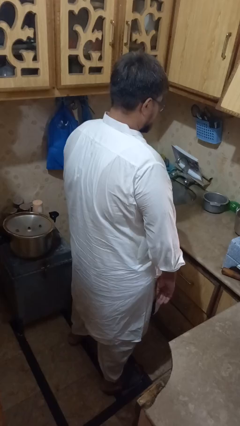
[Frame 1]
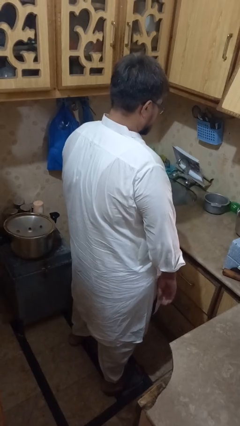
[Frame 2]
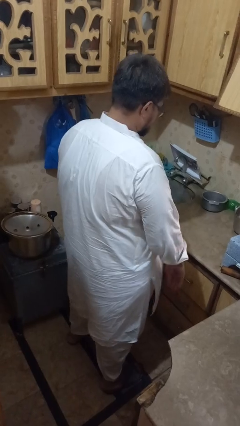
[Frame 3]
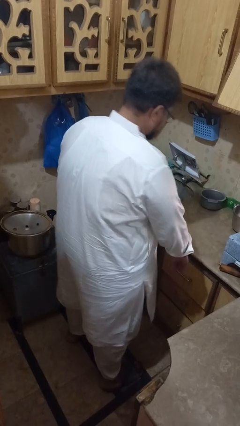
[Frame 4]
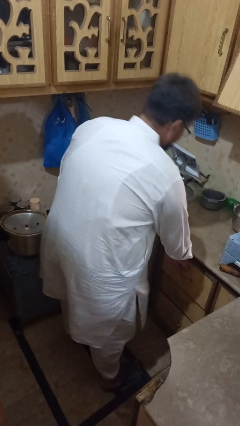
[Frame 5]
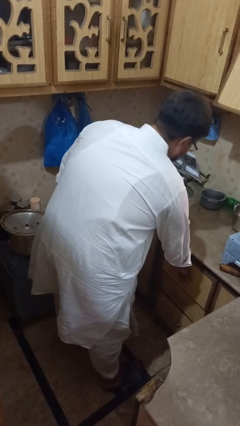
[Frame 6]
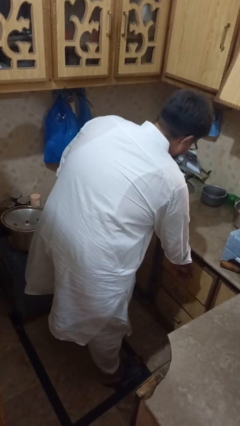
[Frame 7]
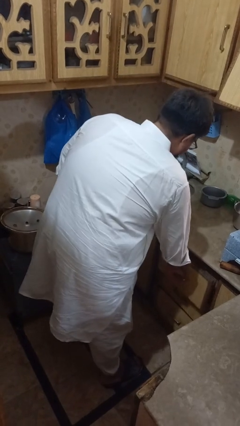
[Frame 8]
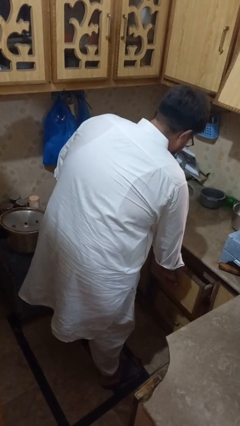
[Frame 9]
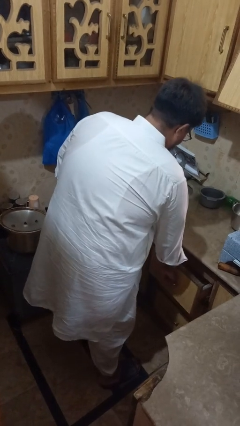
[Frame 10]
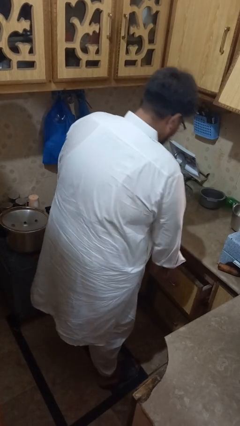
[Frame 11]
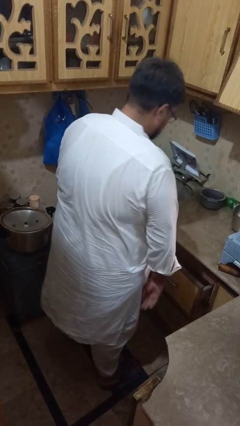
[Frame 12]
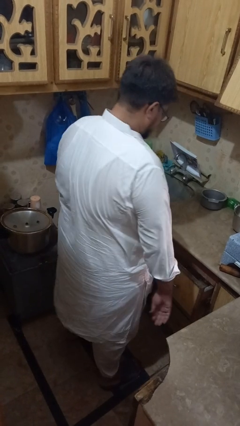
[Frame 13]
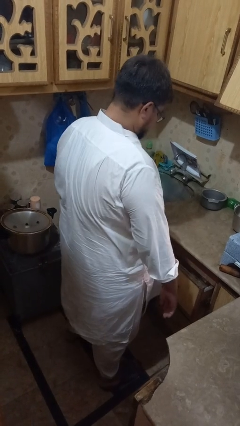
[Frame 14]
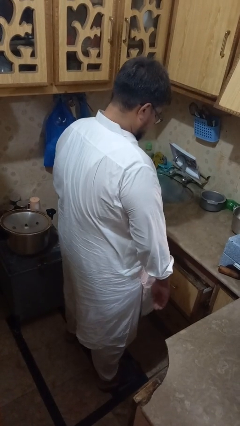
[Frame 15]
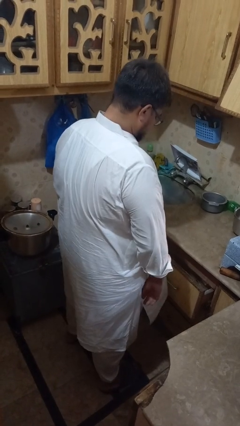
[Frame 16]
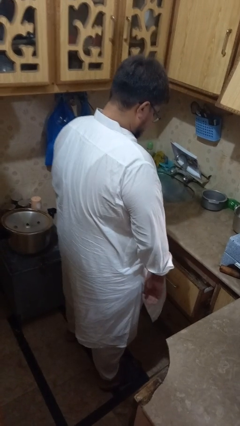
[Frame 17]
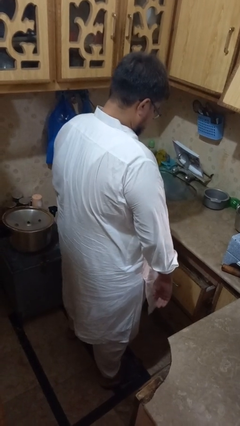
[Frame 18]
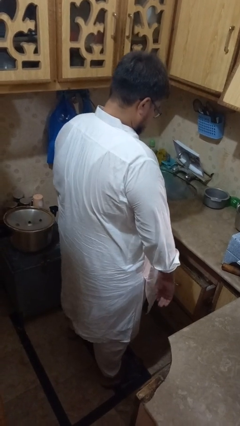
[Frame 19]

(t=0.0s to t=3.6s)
person opens kitchen drawer

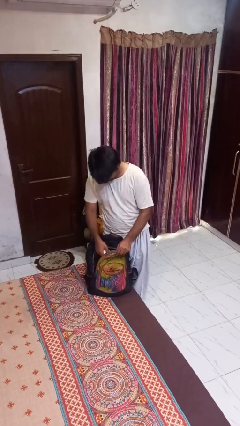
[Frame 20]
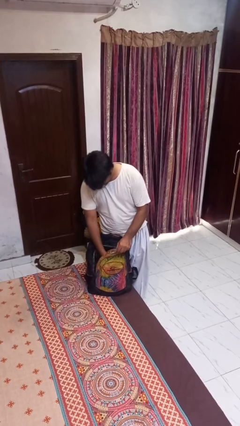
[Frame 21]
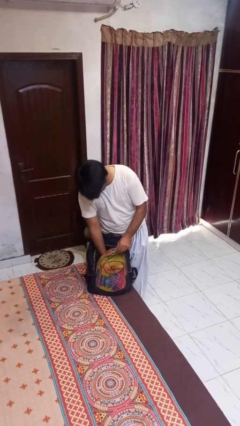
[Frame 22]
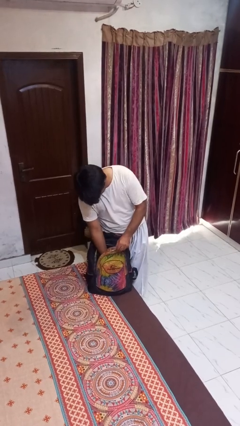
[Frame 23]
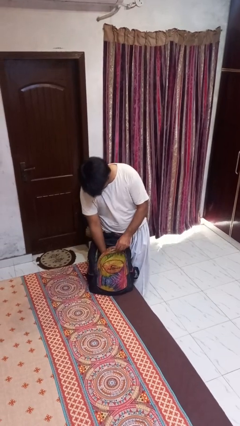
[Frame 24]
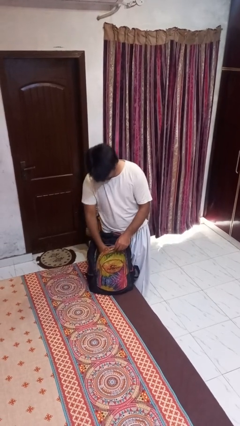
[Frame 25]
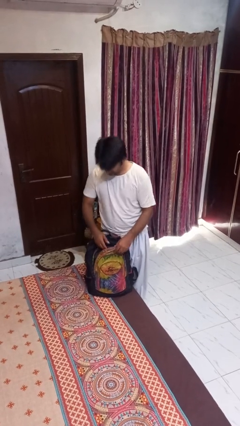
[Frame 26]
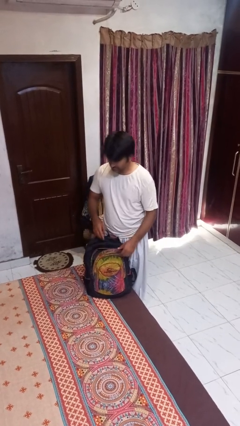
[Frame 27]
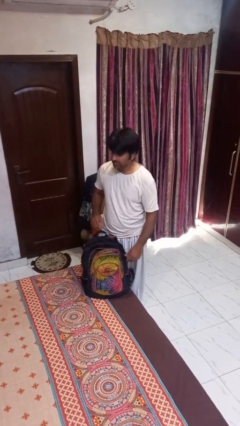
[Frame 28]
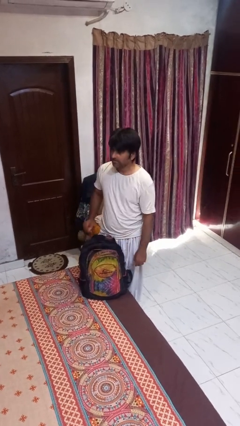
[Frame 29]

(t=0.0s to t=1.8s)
person puts object into backpack

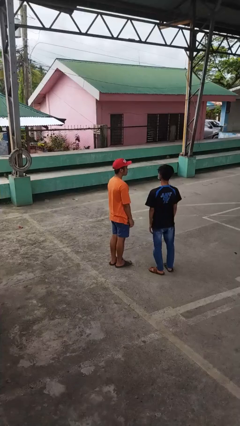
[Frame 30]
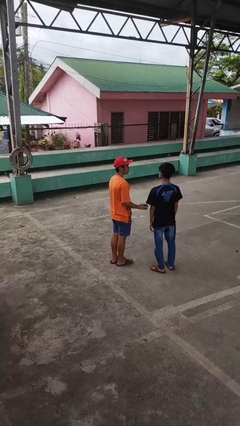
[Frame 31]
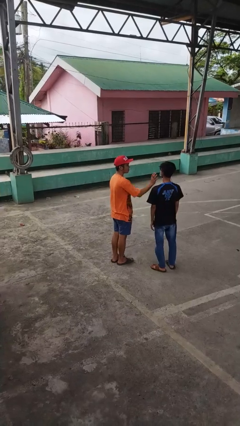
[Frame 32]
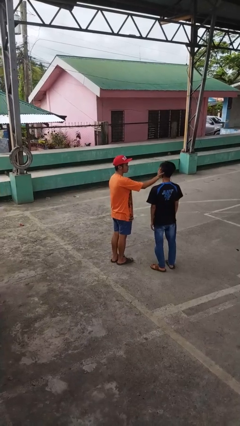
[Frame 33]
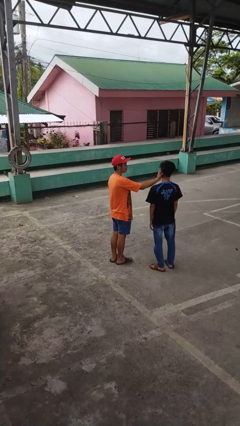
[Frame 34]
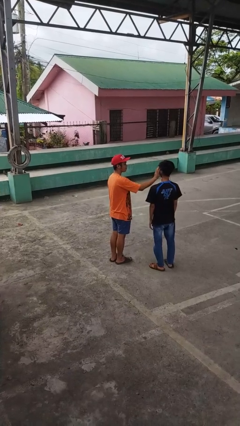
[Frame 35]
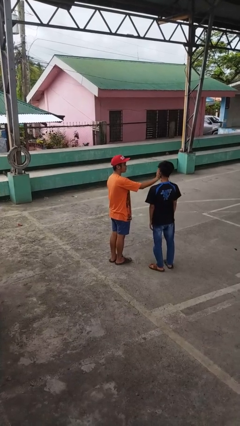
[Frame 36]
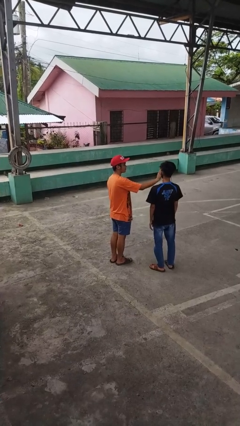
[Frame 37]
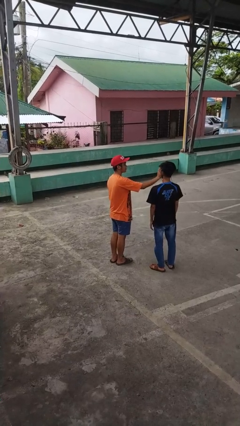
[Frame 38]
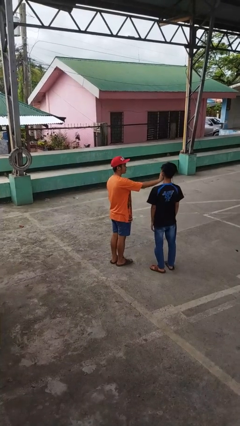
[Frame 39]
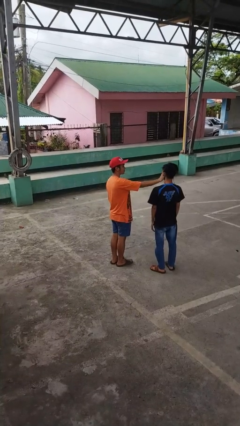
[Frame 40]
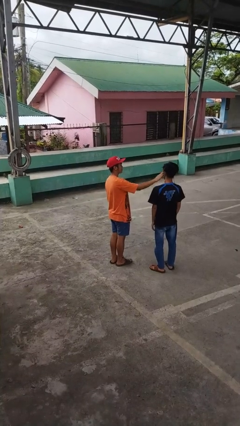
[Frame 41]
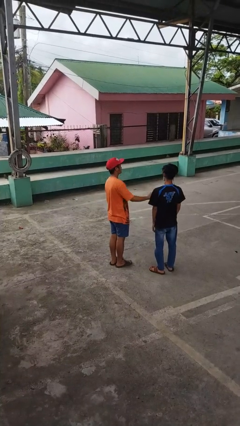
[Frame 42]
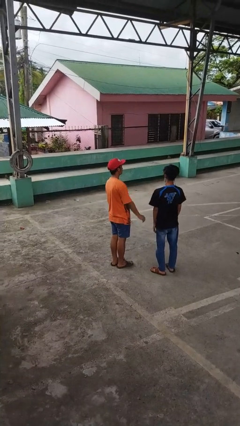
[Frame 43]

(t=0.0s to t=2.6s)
person touches face of person

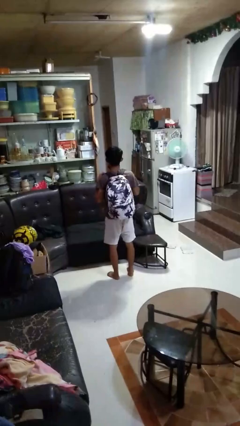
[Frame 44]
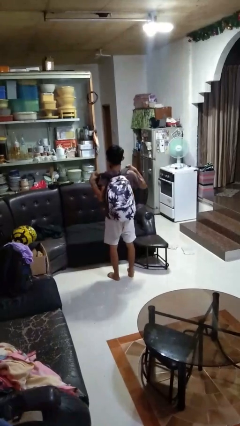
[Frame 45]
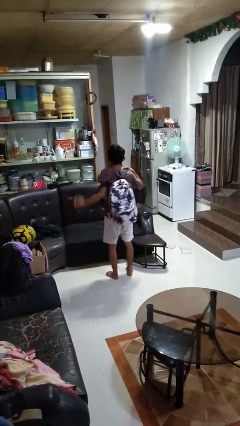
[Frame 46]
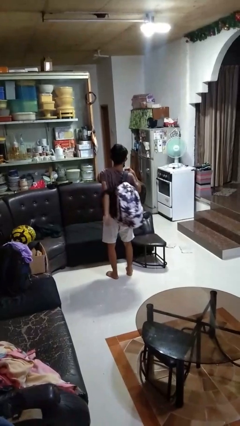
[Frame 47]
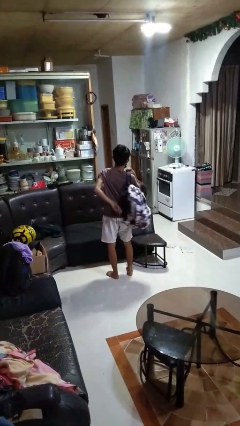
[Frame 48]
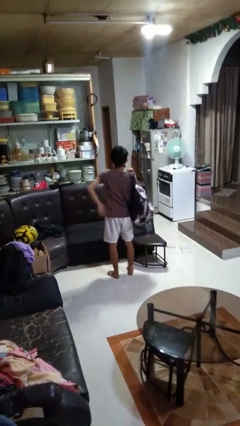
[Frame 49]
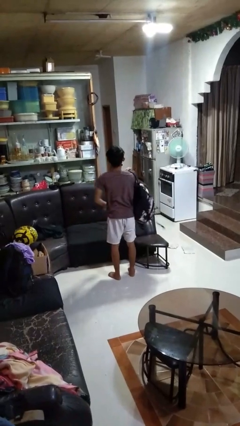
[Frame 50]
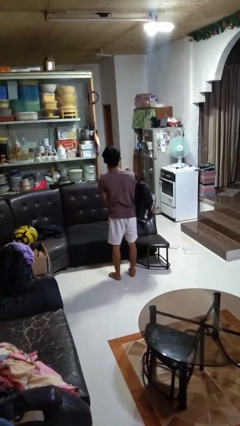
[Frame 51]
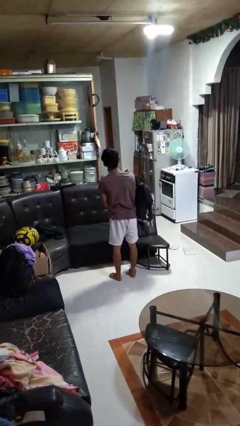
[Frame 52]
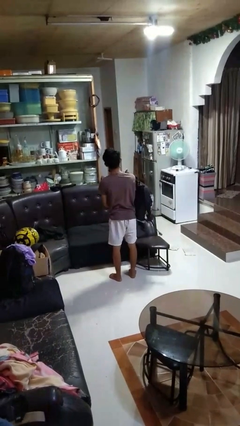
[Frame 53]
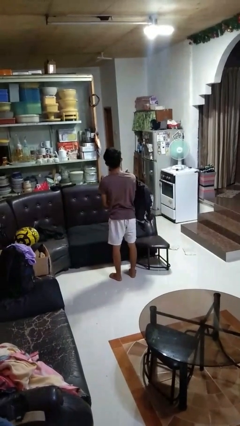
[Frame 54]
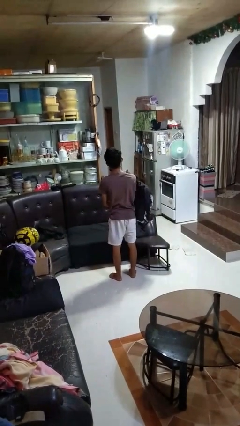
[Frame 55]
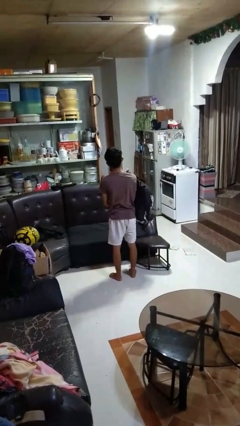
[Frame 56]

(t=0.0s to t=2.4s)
person takes off backpack

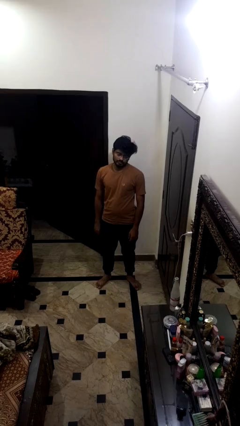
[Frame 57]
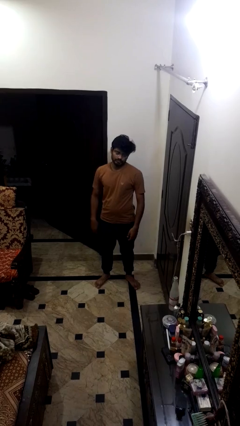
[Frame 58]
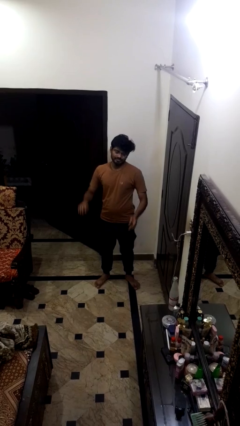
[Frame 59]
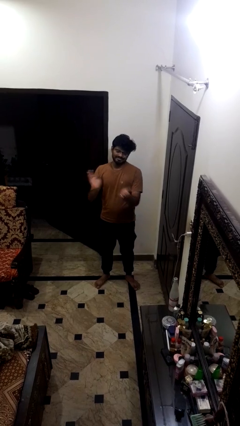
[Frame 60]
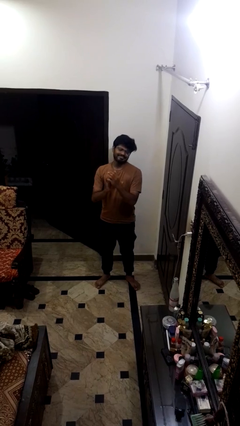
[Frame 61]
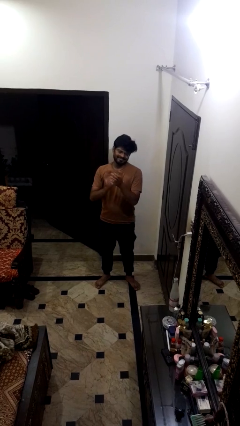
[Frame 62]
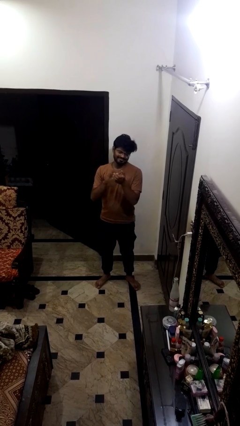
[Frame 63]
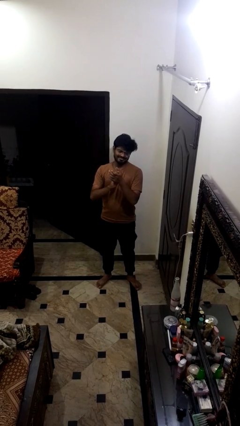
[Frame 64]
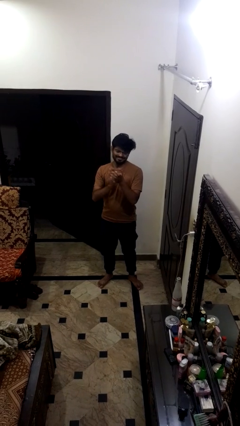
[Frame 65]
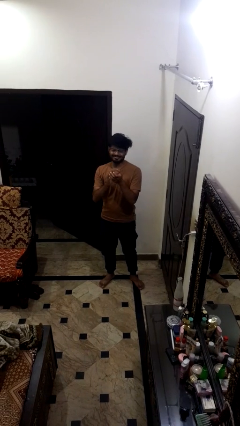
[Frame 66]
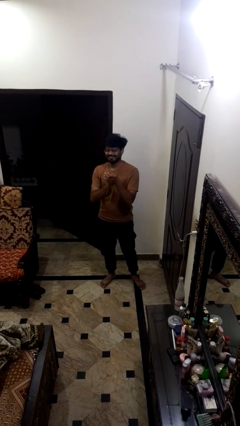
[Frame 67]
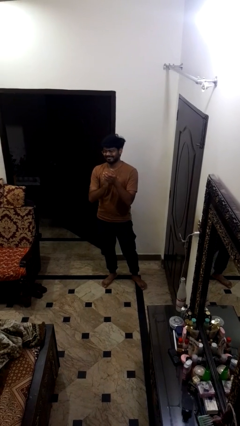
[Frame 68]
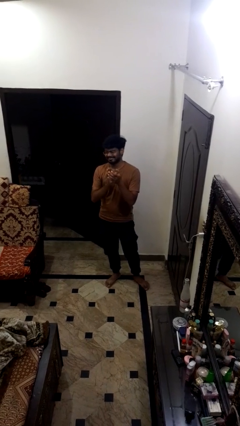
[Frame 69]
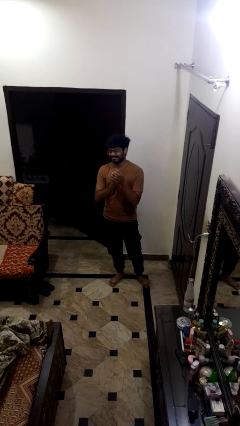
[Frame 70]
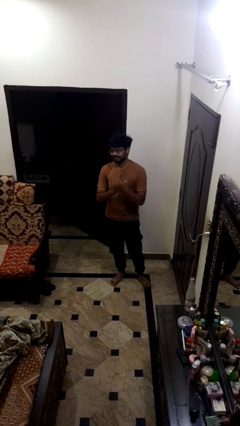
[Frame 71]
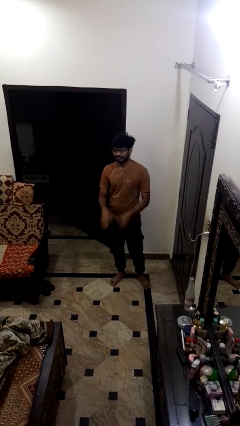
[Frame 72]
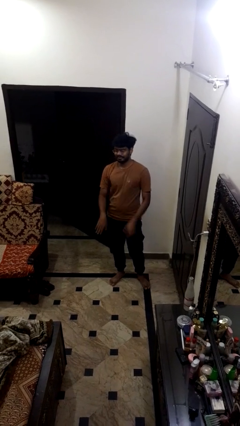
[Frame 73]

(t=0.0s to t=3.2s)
person claps hands

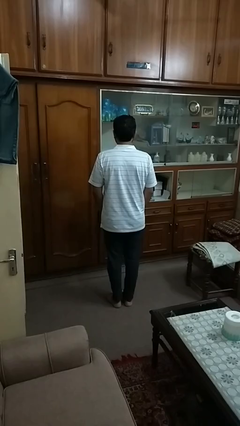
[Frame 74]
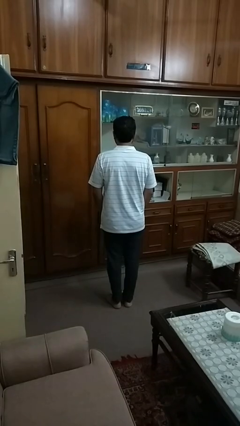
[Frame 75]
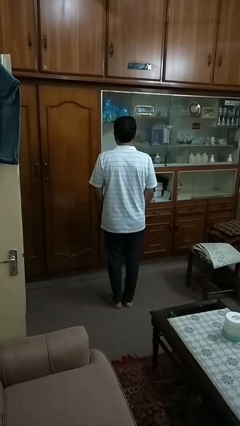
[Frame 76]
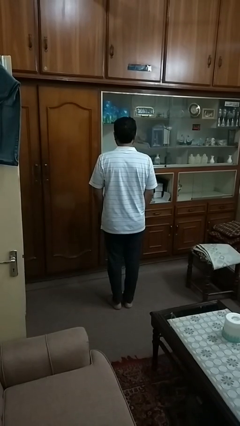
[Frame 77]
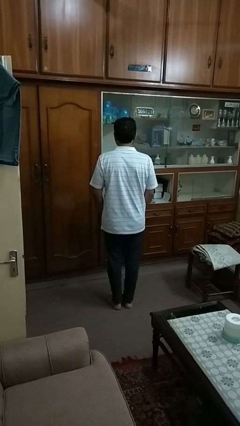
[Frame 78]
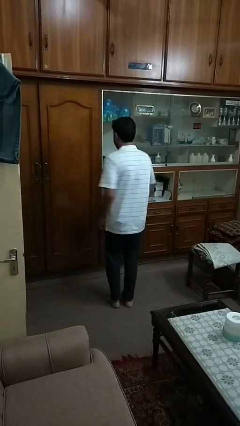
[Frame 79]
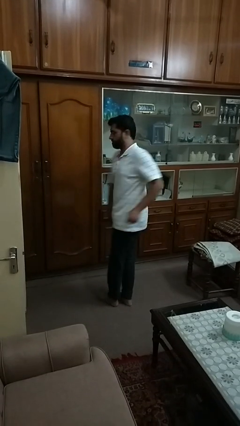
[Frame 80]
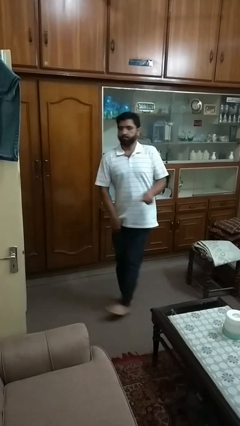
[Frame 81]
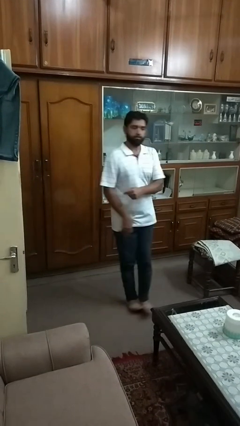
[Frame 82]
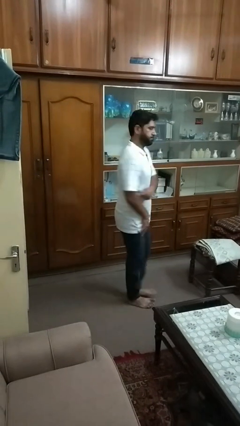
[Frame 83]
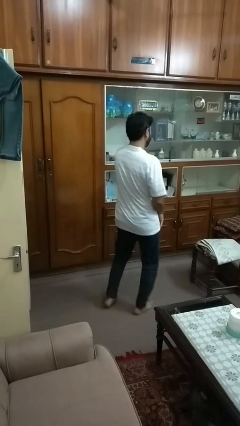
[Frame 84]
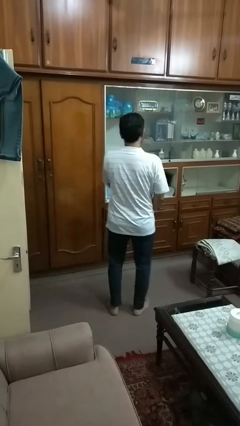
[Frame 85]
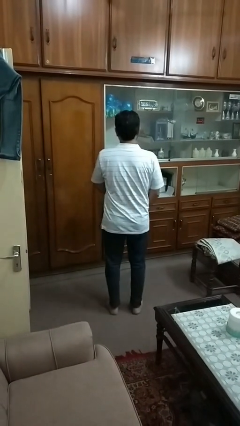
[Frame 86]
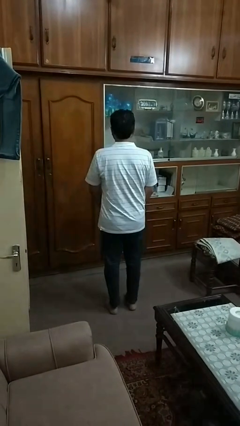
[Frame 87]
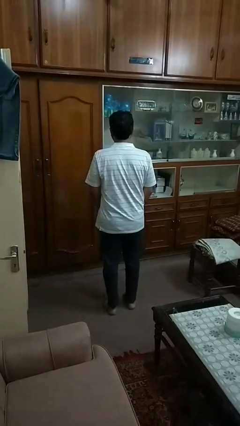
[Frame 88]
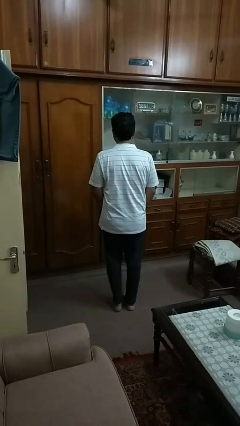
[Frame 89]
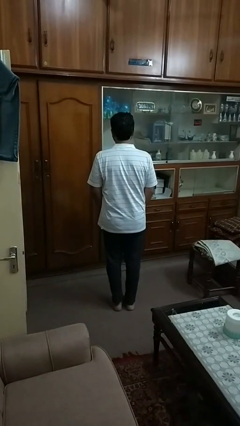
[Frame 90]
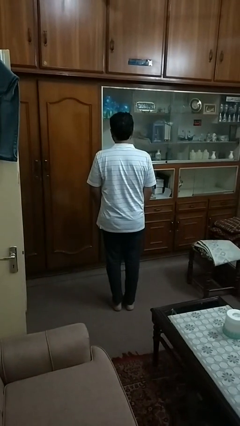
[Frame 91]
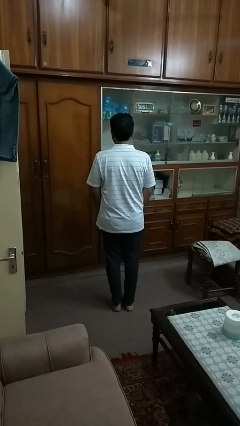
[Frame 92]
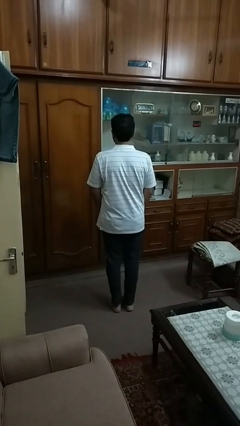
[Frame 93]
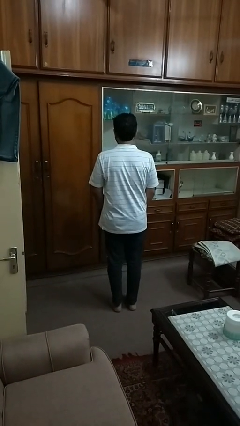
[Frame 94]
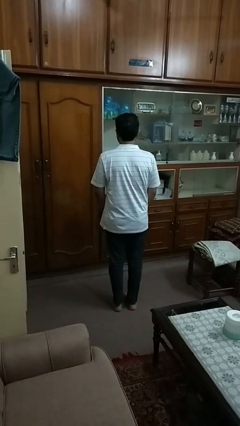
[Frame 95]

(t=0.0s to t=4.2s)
person twirls
